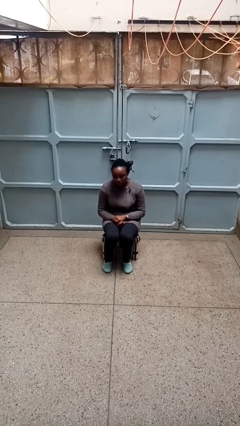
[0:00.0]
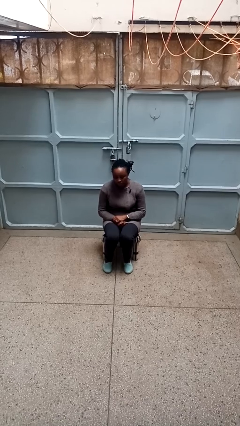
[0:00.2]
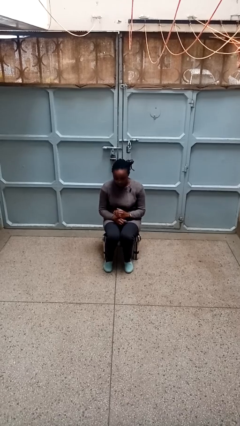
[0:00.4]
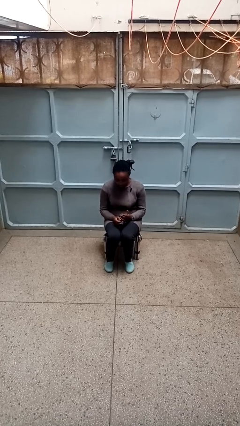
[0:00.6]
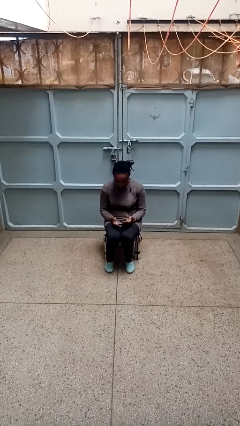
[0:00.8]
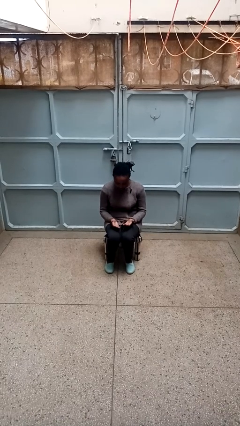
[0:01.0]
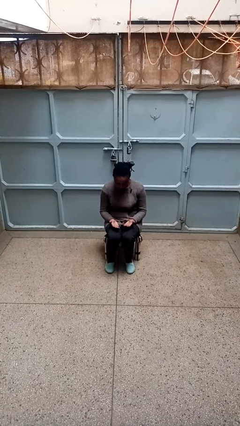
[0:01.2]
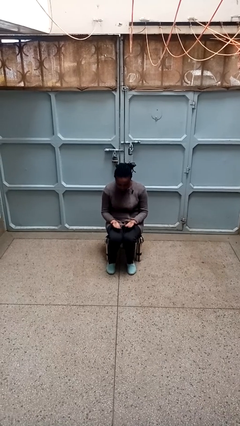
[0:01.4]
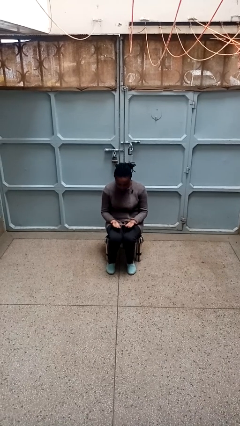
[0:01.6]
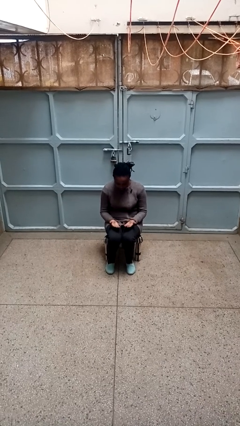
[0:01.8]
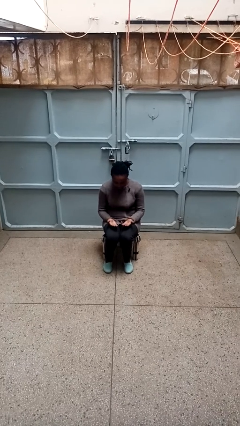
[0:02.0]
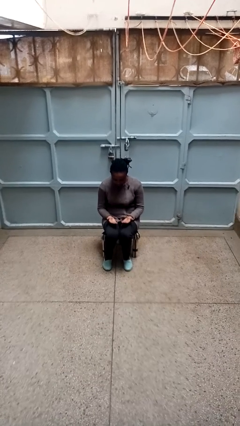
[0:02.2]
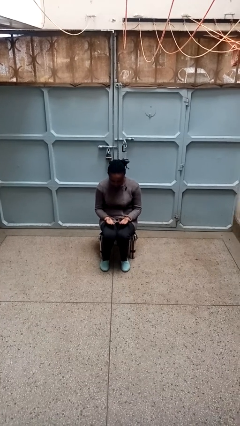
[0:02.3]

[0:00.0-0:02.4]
person looks at hands in lap

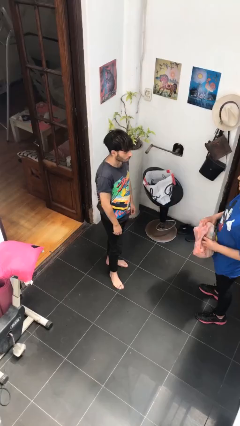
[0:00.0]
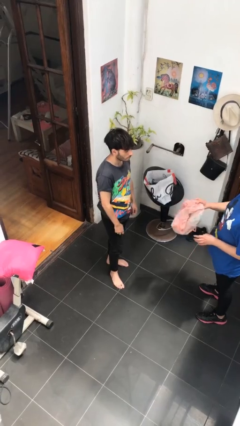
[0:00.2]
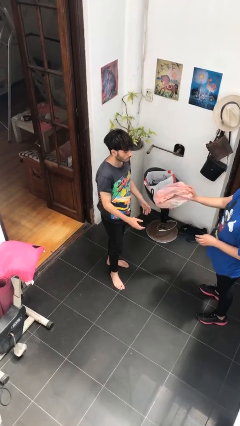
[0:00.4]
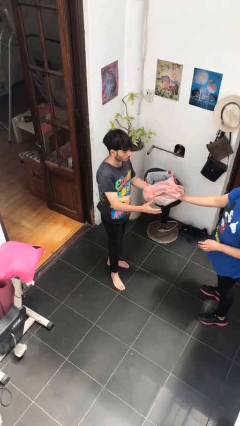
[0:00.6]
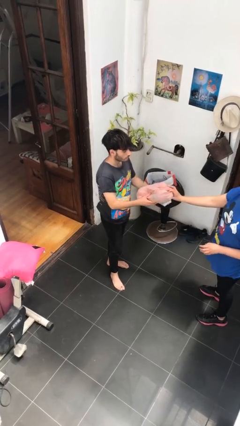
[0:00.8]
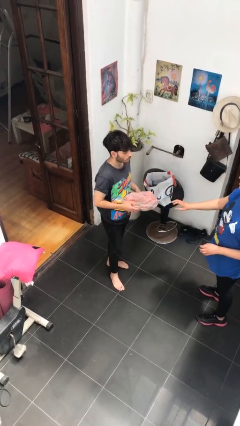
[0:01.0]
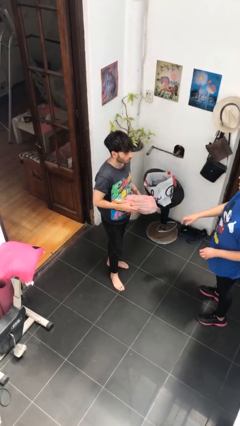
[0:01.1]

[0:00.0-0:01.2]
person transfers object to person

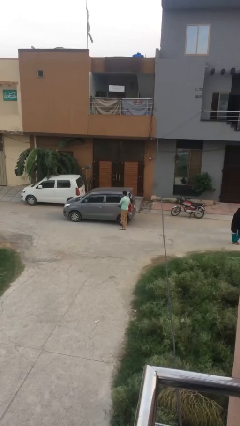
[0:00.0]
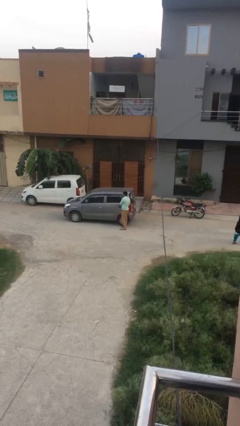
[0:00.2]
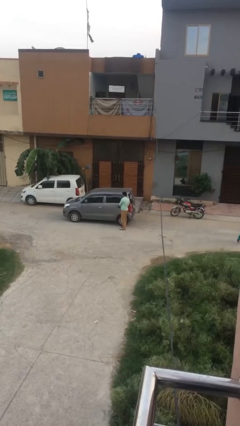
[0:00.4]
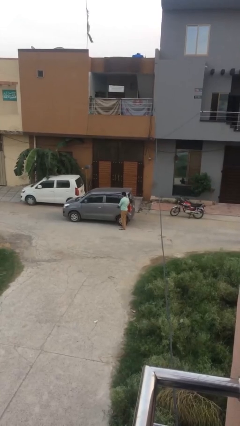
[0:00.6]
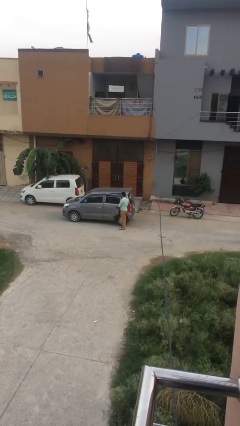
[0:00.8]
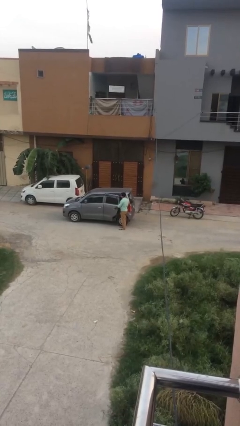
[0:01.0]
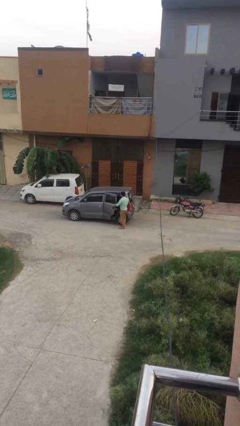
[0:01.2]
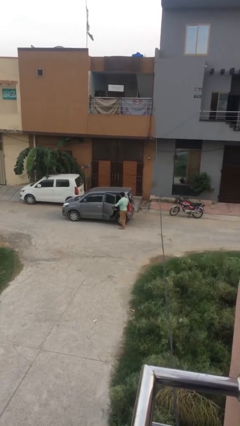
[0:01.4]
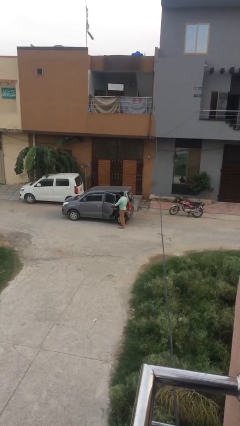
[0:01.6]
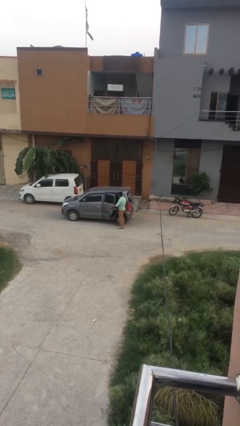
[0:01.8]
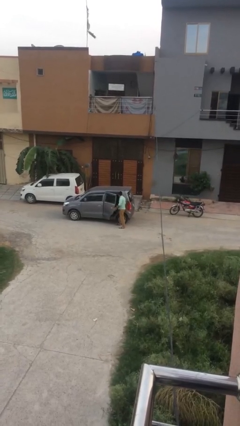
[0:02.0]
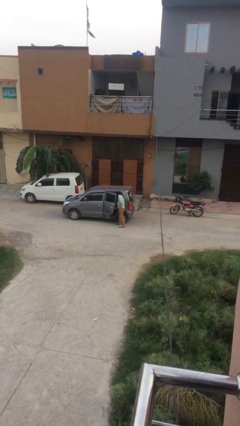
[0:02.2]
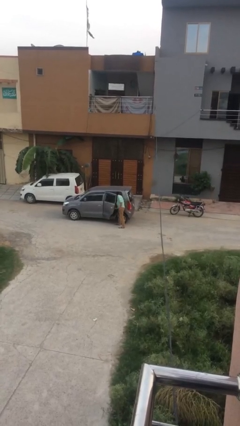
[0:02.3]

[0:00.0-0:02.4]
person opens car door

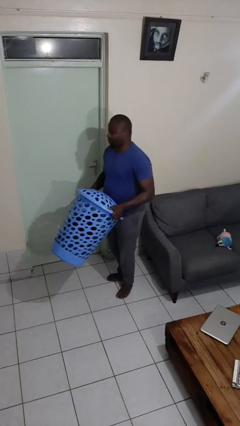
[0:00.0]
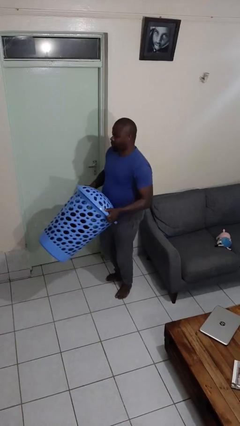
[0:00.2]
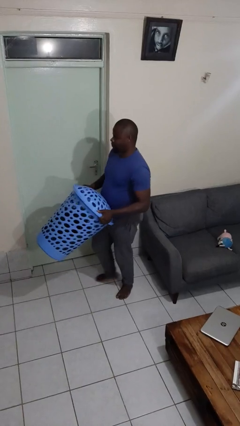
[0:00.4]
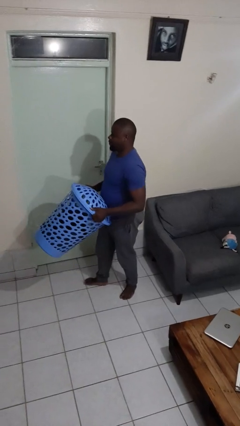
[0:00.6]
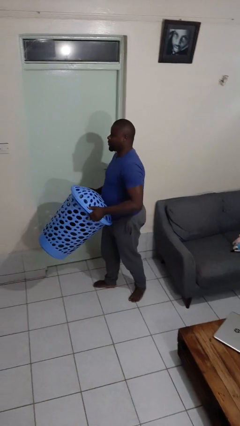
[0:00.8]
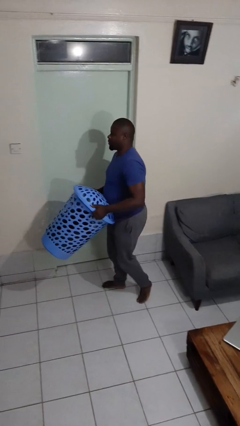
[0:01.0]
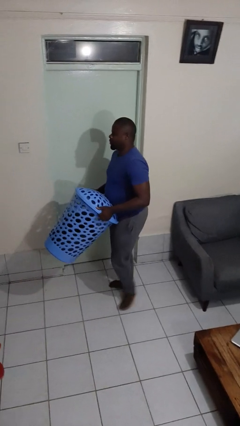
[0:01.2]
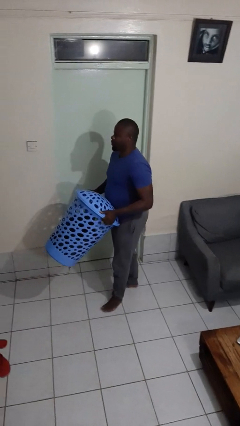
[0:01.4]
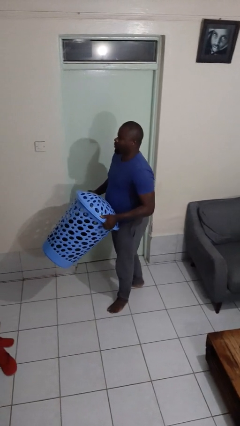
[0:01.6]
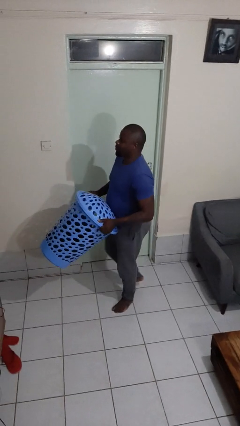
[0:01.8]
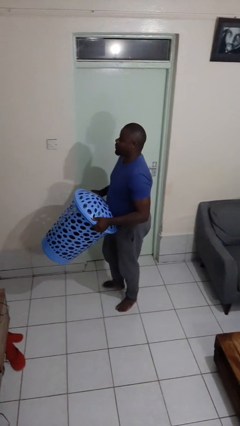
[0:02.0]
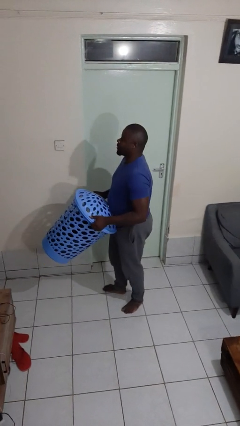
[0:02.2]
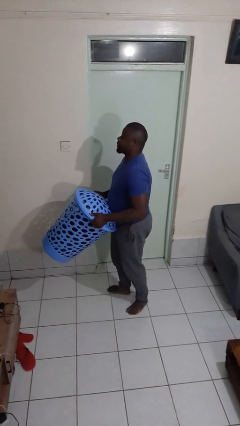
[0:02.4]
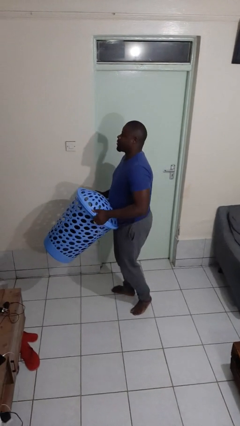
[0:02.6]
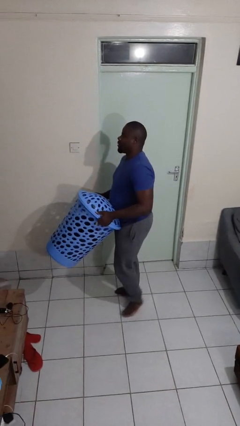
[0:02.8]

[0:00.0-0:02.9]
person carries laundry basket

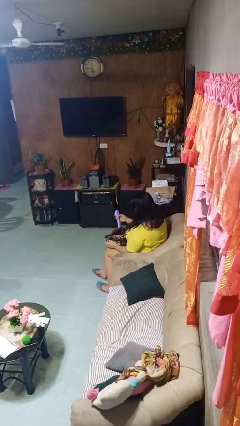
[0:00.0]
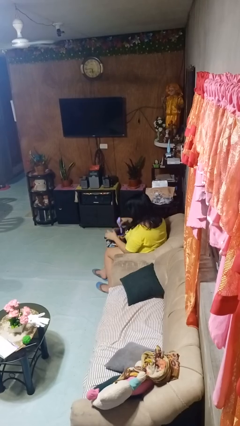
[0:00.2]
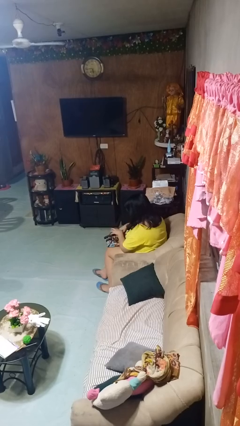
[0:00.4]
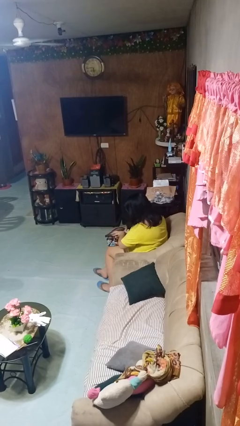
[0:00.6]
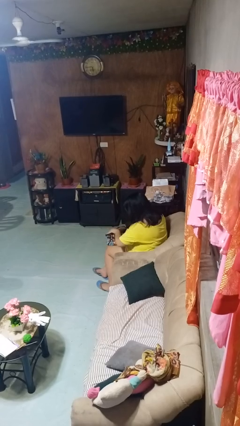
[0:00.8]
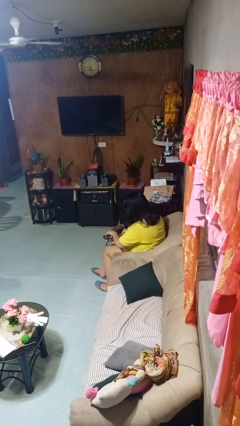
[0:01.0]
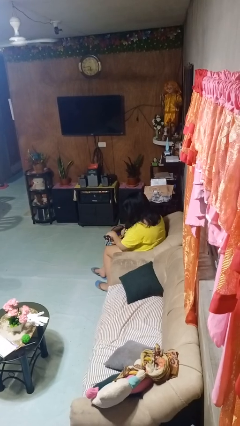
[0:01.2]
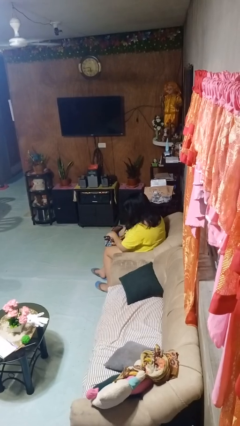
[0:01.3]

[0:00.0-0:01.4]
person puts object into backpack

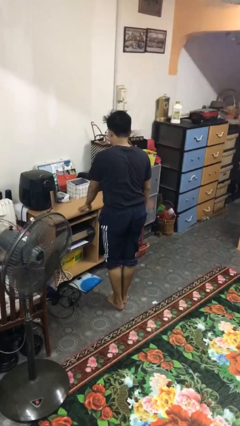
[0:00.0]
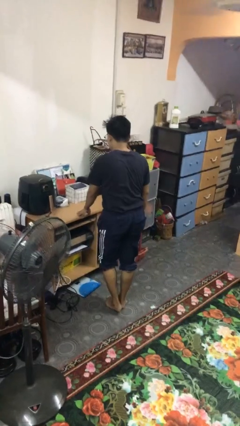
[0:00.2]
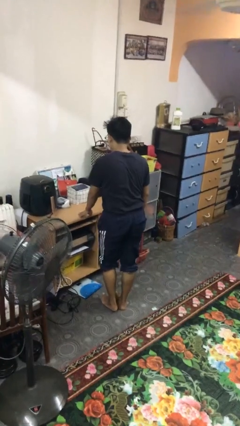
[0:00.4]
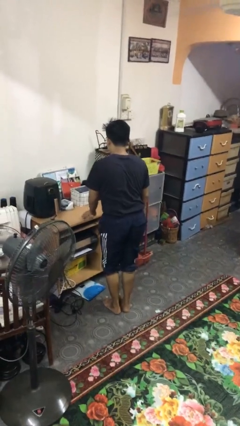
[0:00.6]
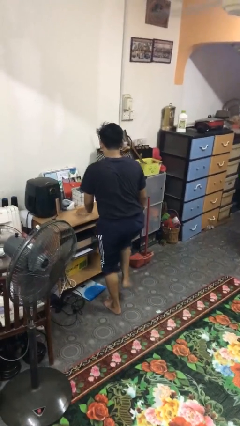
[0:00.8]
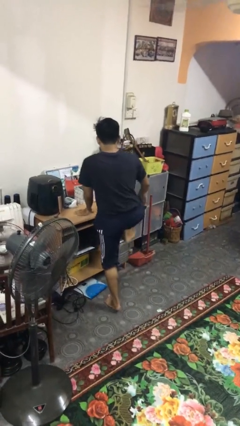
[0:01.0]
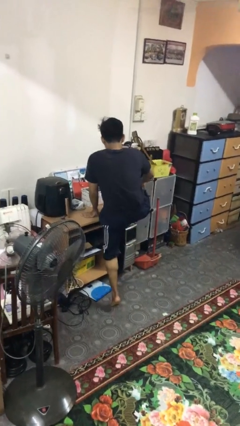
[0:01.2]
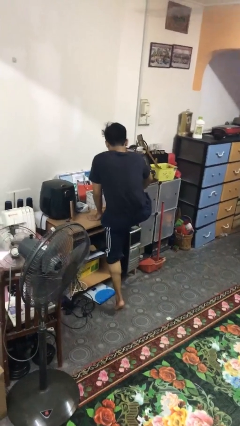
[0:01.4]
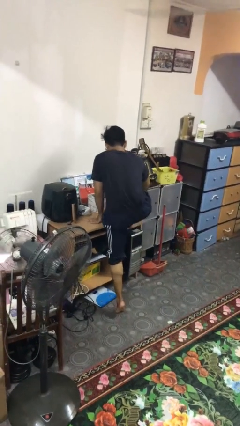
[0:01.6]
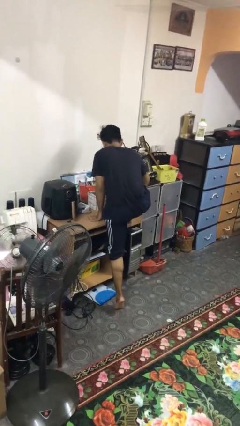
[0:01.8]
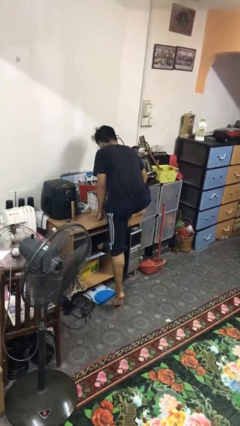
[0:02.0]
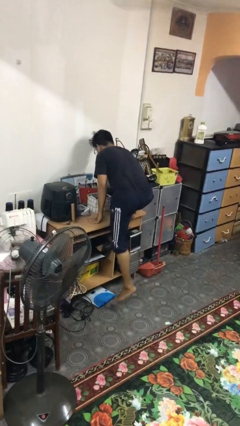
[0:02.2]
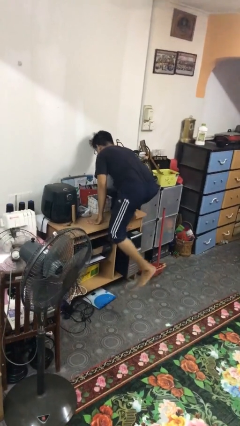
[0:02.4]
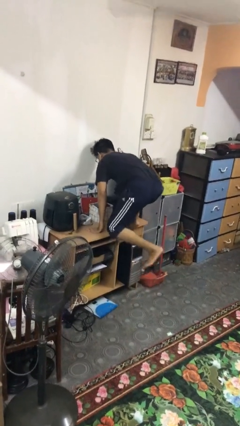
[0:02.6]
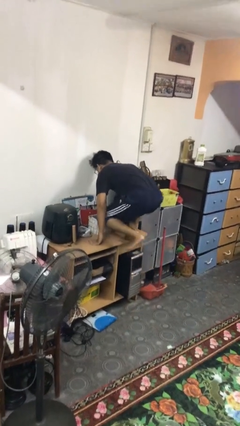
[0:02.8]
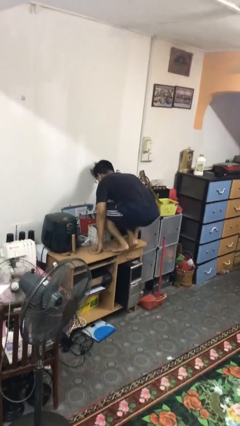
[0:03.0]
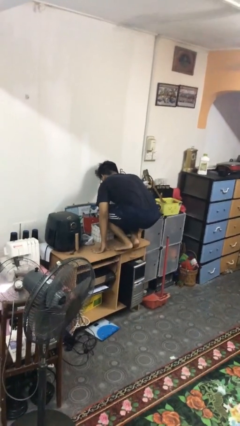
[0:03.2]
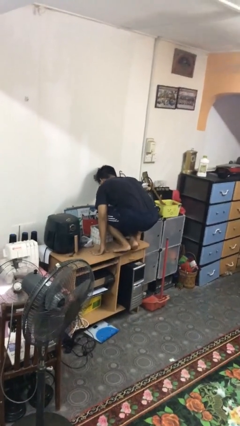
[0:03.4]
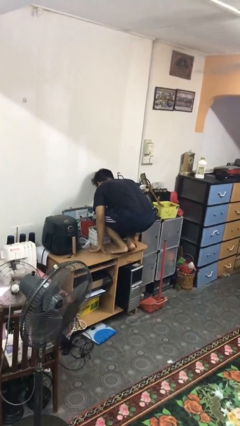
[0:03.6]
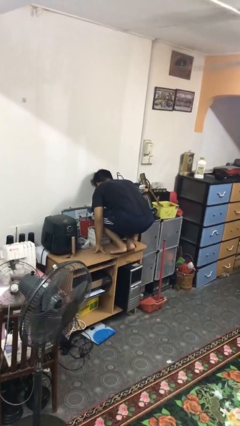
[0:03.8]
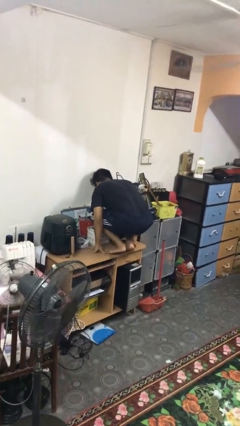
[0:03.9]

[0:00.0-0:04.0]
person climbs on table

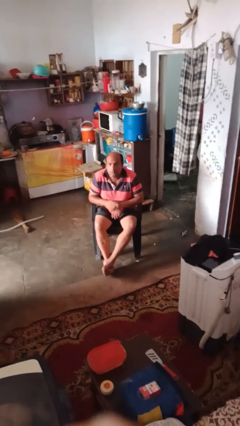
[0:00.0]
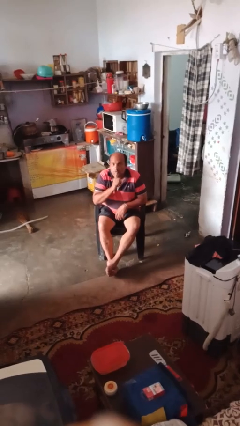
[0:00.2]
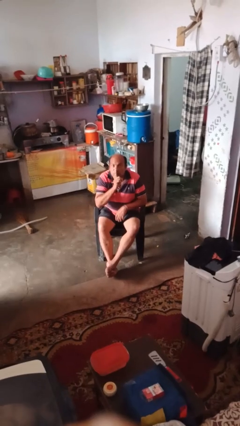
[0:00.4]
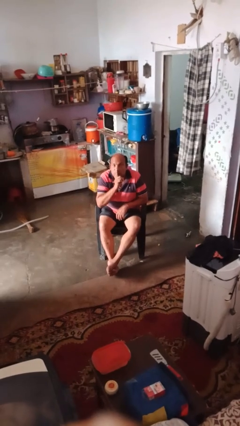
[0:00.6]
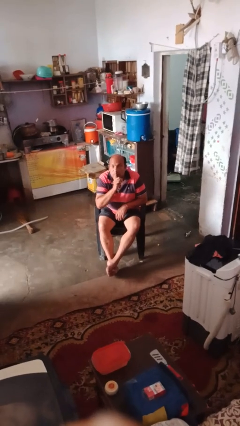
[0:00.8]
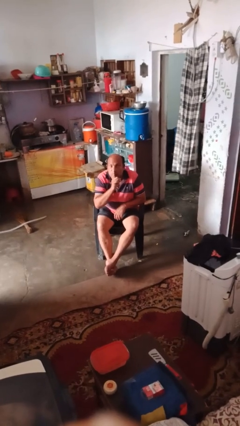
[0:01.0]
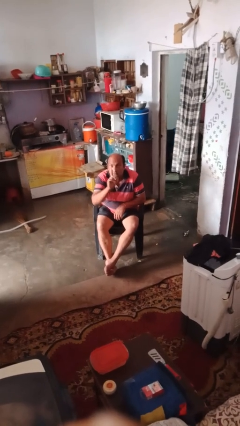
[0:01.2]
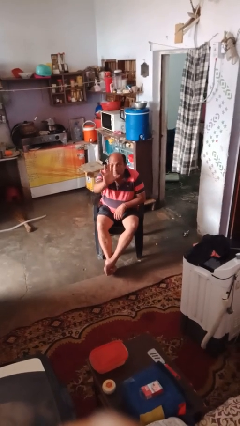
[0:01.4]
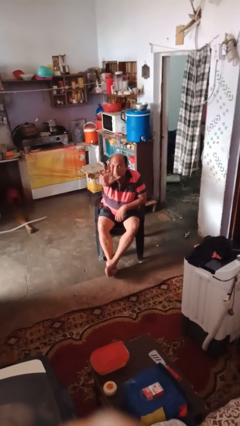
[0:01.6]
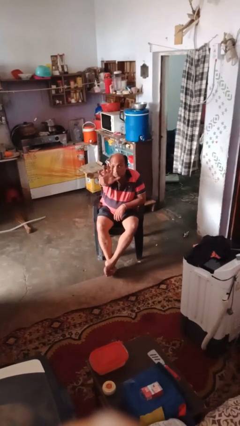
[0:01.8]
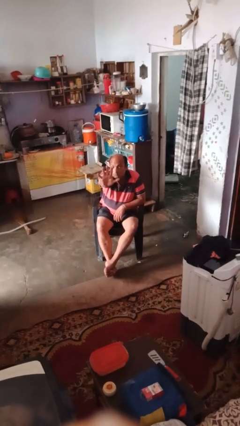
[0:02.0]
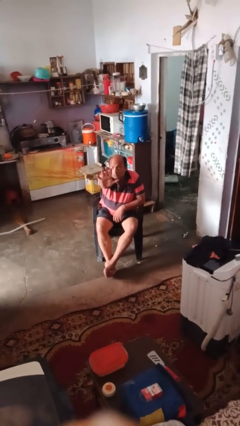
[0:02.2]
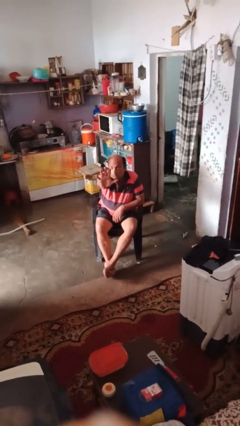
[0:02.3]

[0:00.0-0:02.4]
person gestures be quiet

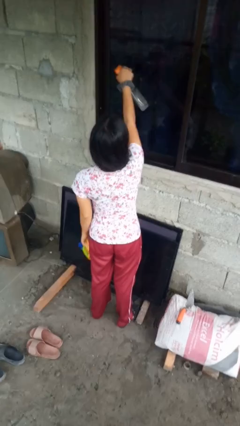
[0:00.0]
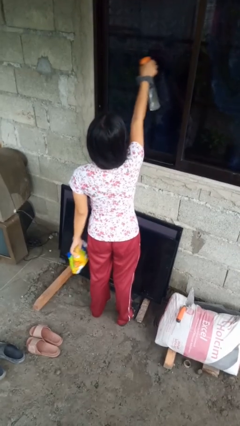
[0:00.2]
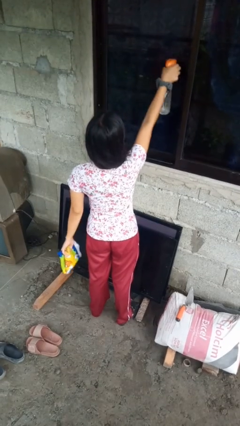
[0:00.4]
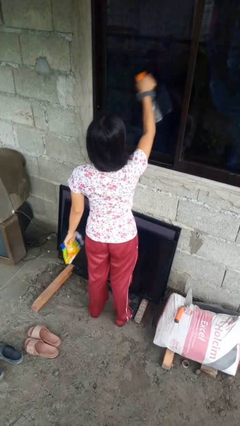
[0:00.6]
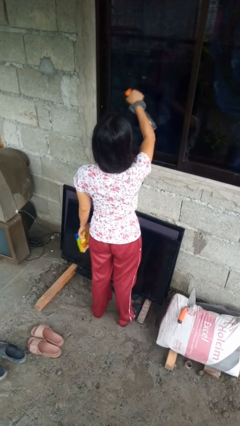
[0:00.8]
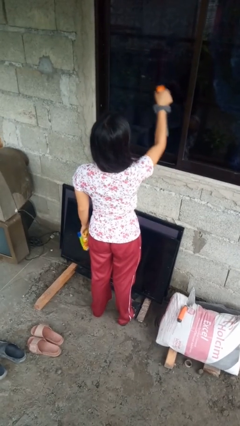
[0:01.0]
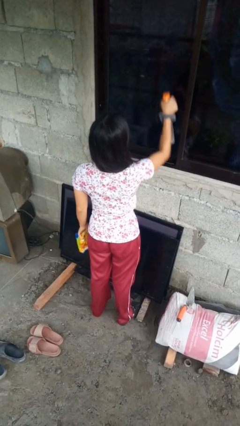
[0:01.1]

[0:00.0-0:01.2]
person sprays from bottle
